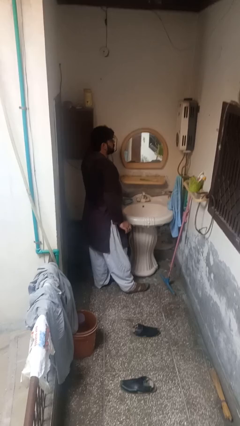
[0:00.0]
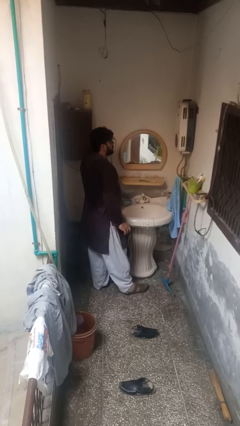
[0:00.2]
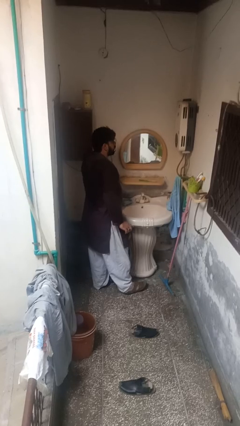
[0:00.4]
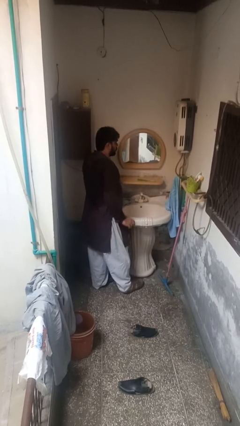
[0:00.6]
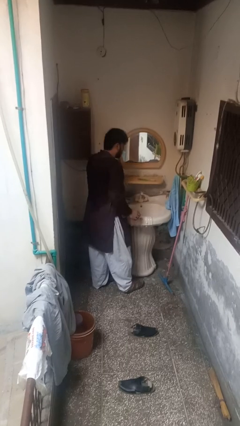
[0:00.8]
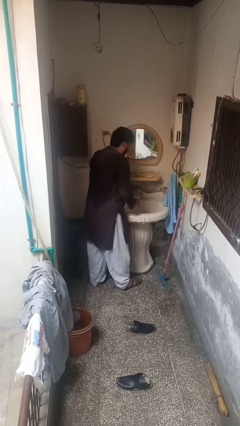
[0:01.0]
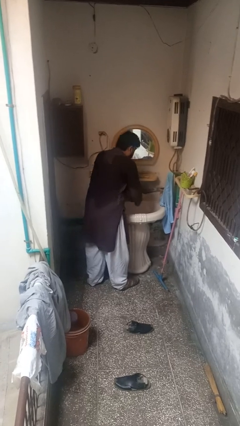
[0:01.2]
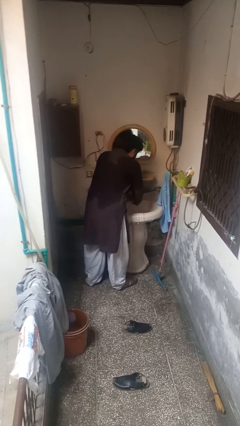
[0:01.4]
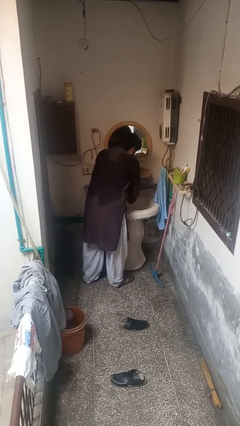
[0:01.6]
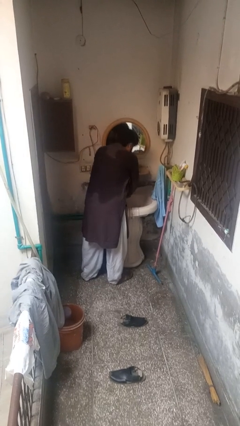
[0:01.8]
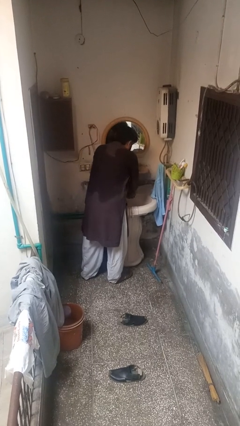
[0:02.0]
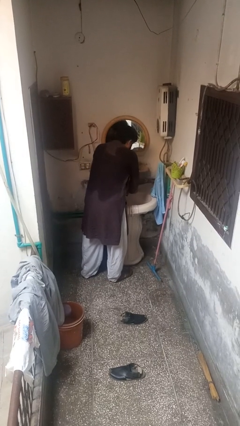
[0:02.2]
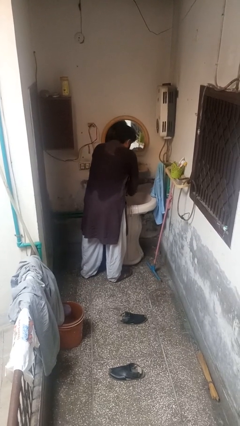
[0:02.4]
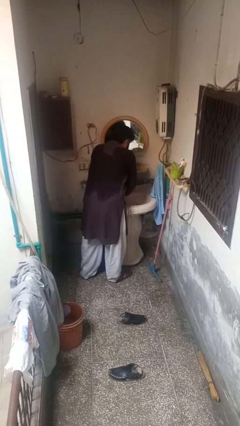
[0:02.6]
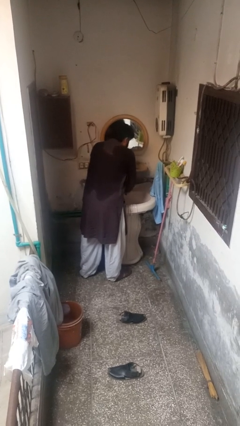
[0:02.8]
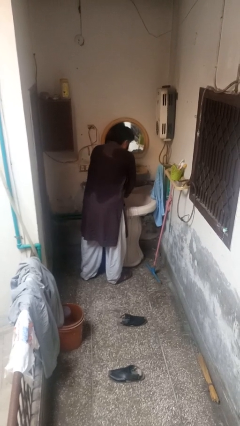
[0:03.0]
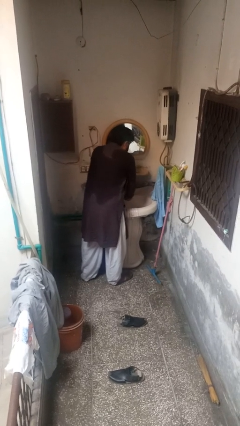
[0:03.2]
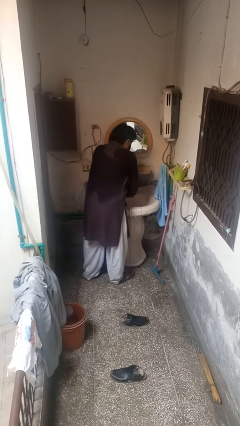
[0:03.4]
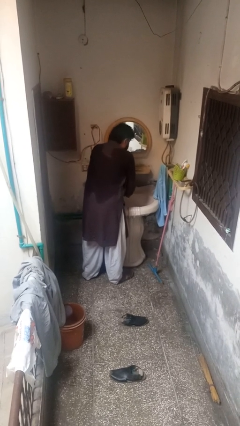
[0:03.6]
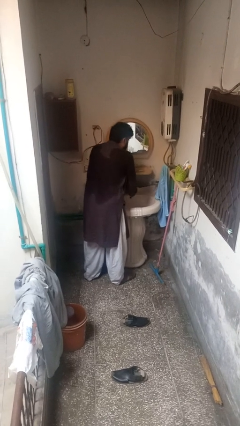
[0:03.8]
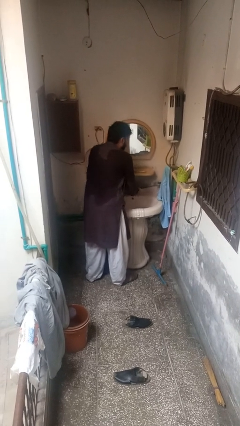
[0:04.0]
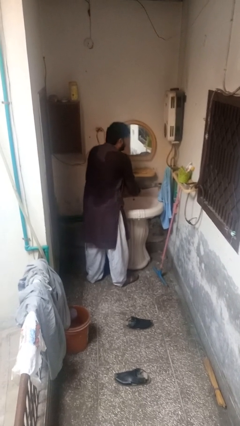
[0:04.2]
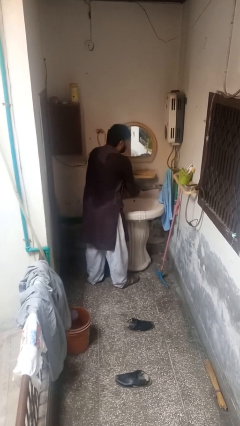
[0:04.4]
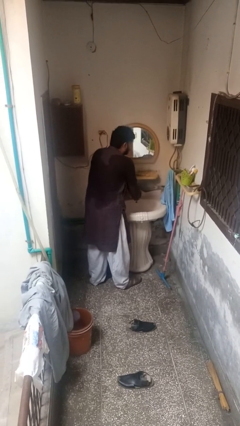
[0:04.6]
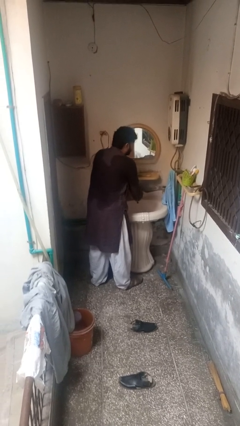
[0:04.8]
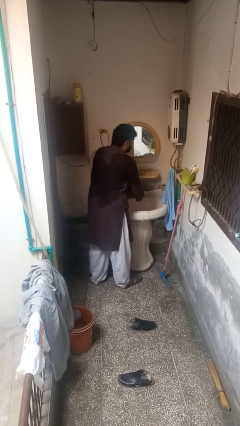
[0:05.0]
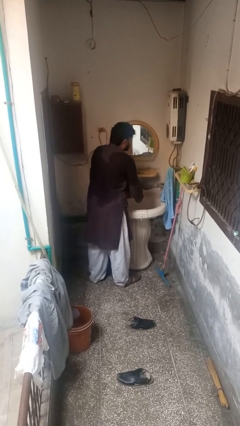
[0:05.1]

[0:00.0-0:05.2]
person washes hands

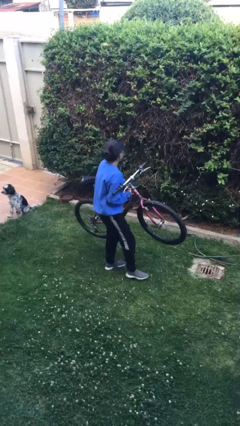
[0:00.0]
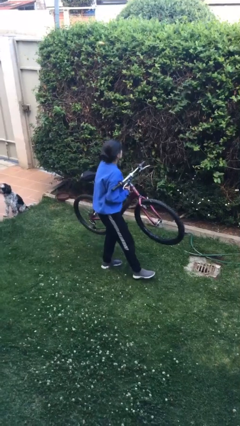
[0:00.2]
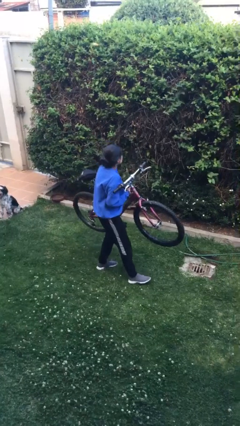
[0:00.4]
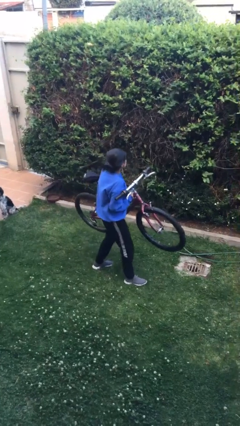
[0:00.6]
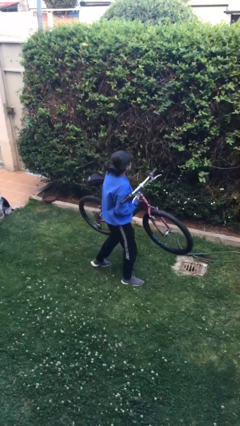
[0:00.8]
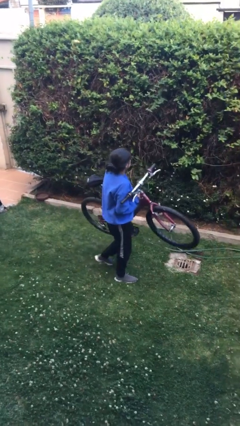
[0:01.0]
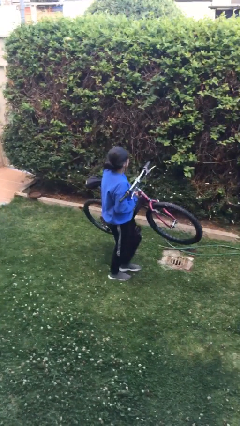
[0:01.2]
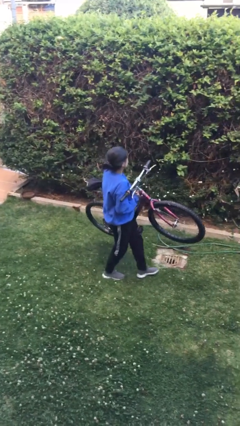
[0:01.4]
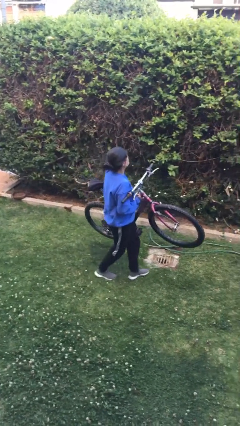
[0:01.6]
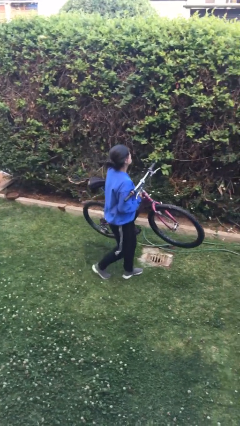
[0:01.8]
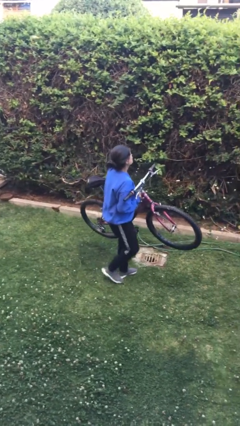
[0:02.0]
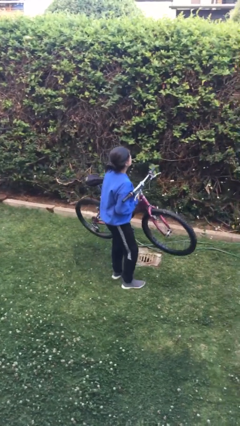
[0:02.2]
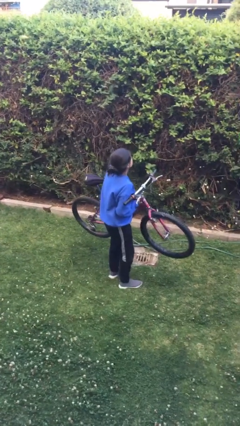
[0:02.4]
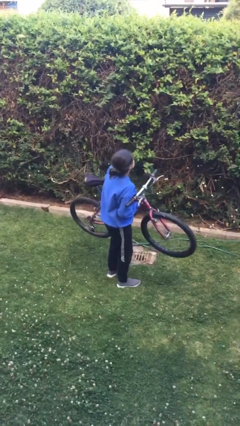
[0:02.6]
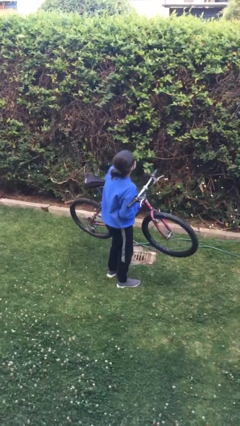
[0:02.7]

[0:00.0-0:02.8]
person carries bicycle

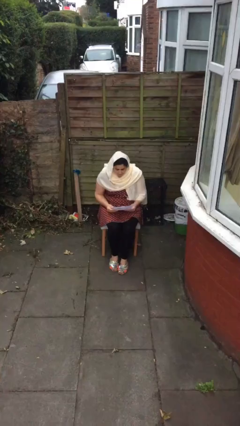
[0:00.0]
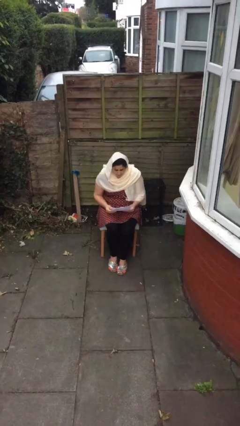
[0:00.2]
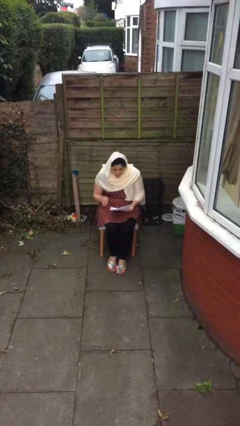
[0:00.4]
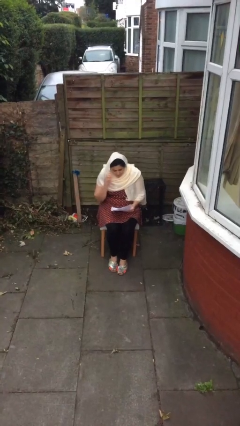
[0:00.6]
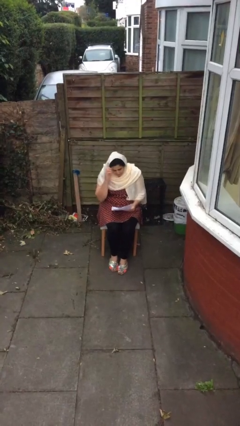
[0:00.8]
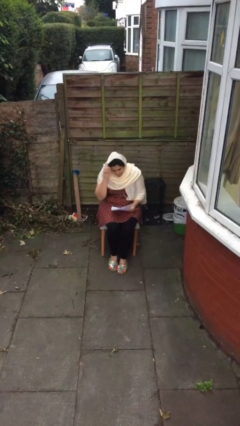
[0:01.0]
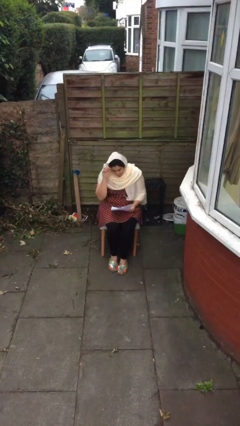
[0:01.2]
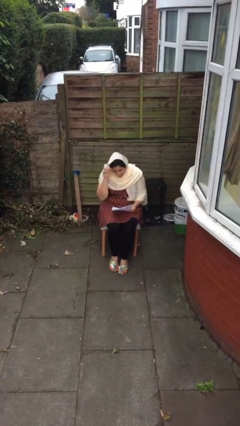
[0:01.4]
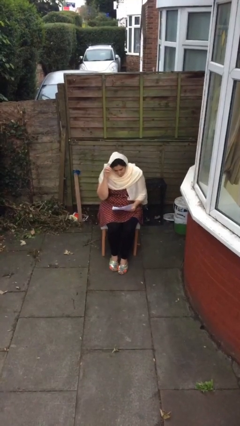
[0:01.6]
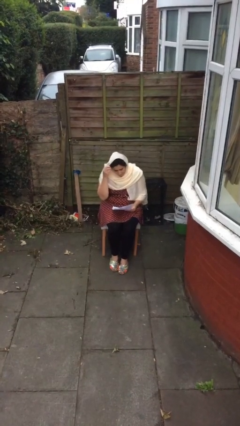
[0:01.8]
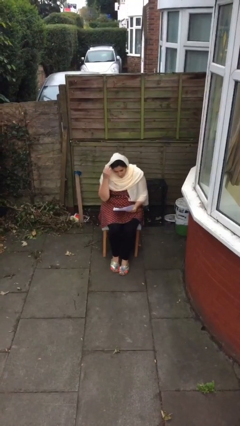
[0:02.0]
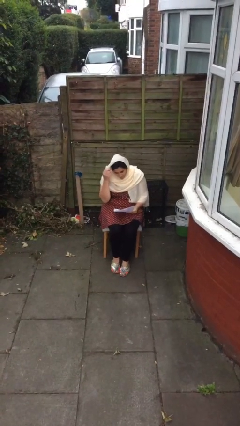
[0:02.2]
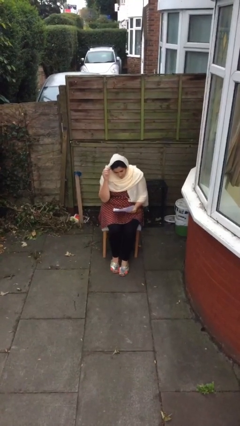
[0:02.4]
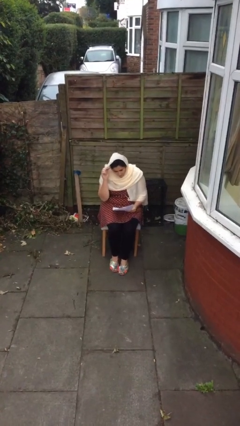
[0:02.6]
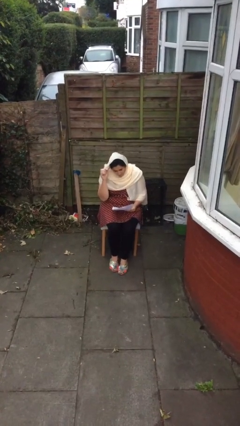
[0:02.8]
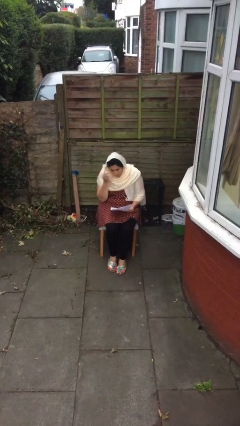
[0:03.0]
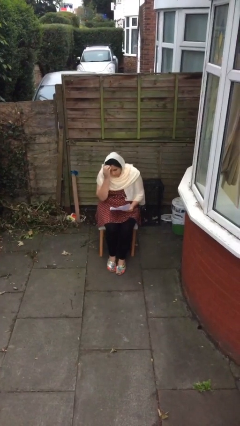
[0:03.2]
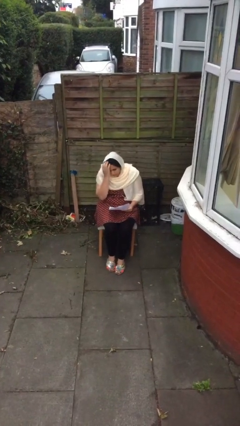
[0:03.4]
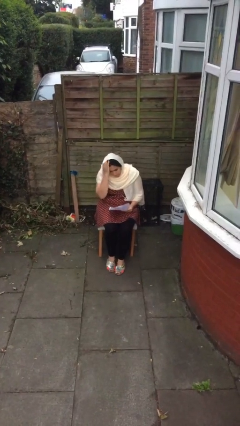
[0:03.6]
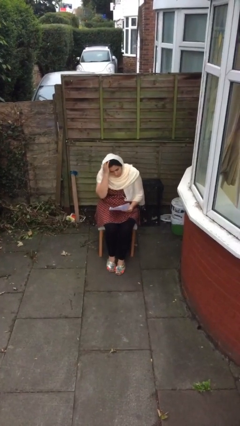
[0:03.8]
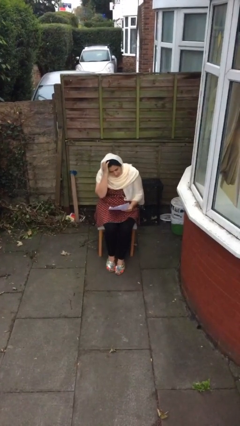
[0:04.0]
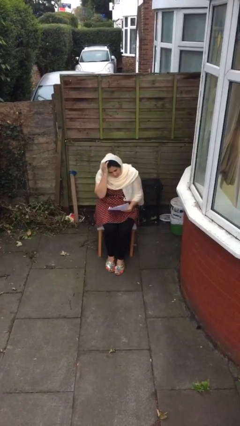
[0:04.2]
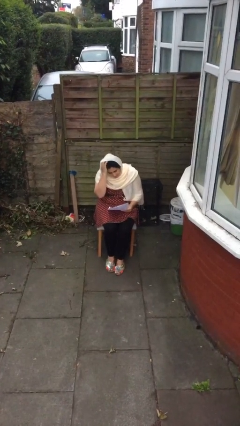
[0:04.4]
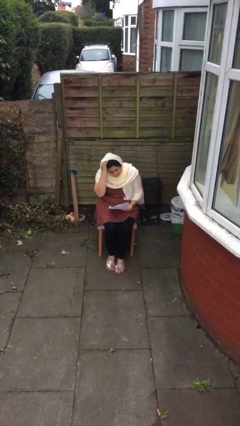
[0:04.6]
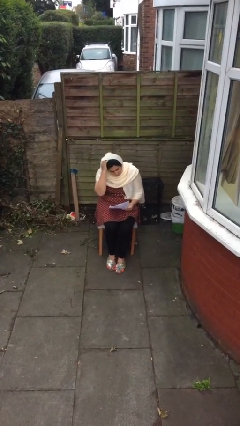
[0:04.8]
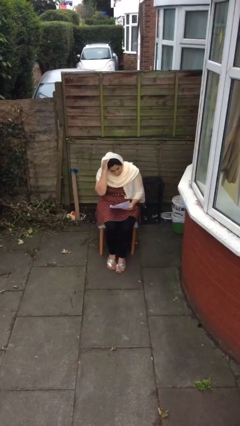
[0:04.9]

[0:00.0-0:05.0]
person reads document

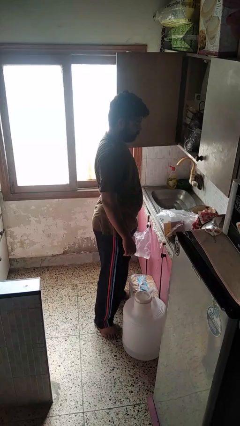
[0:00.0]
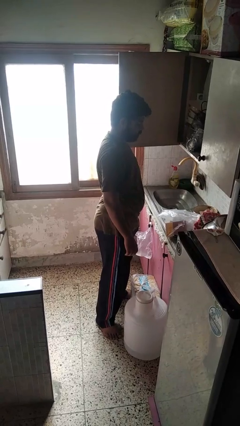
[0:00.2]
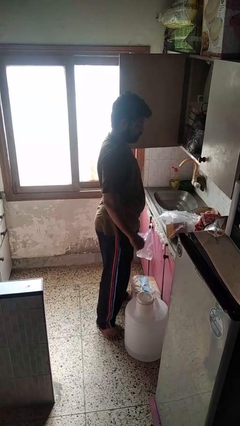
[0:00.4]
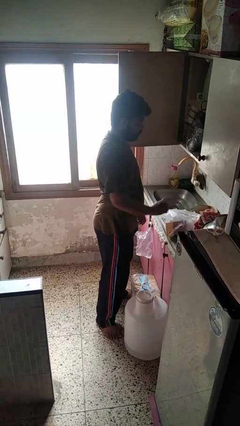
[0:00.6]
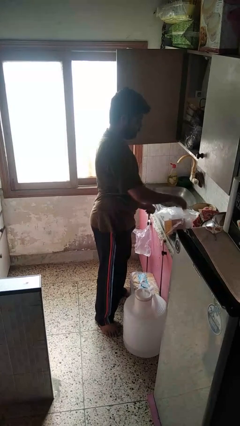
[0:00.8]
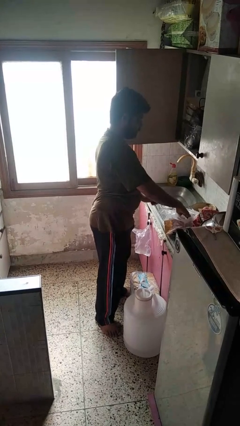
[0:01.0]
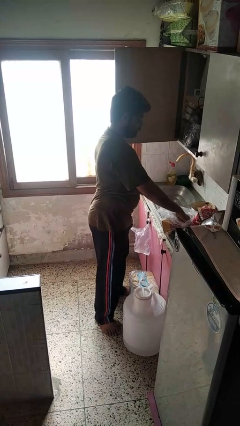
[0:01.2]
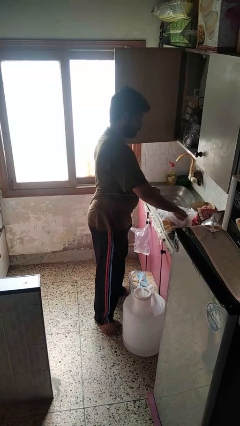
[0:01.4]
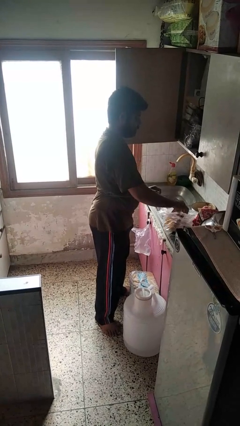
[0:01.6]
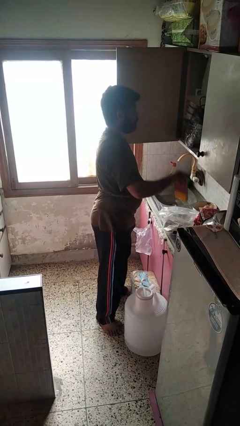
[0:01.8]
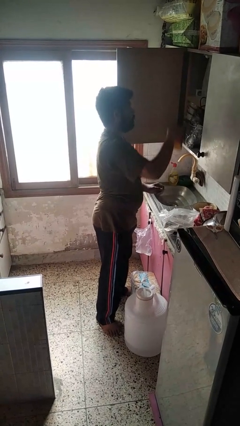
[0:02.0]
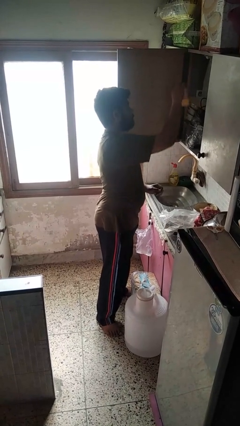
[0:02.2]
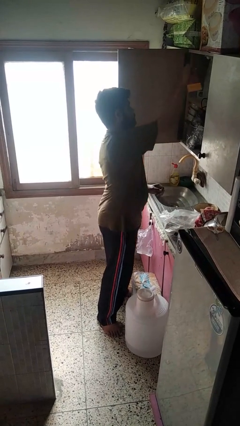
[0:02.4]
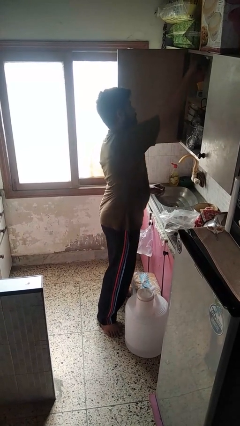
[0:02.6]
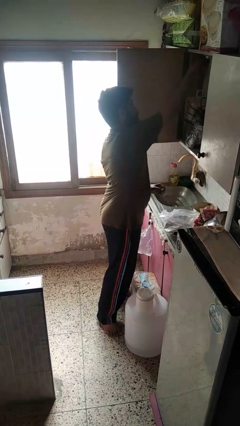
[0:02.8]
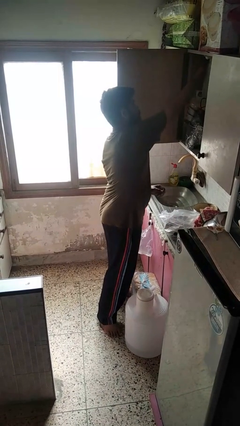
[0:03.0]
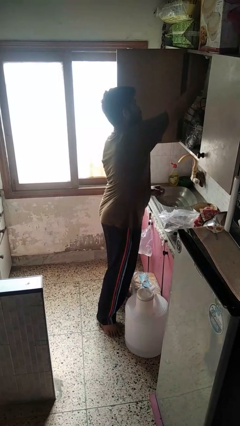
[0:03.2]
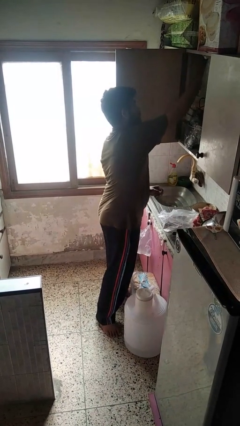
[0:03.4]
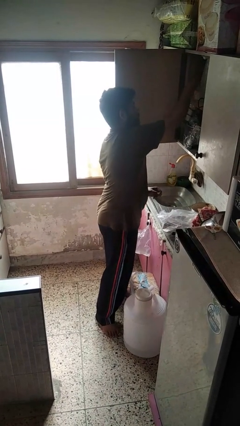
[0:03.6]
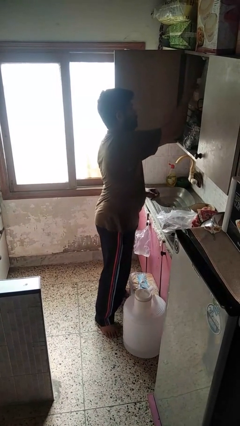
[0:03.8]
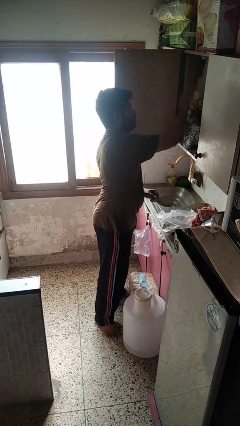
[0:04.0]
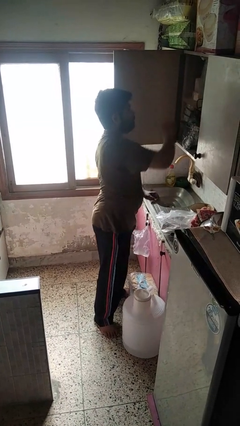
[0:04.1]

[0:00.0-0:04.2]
person loads groceries into cabinet

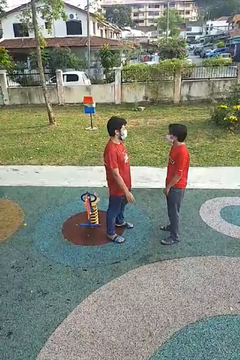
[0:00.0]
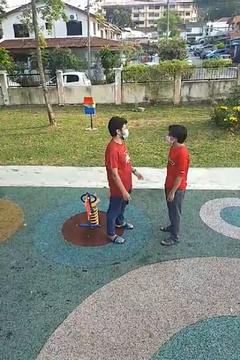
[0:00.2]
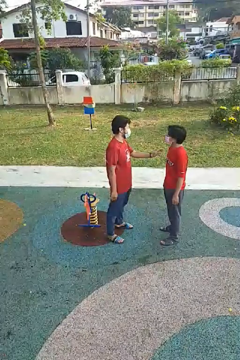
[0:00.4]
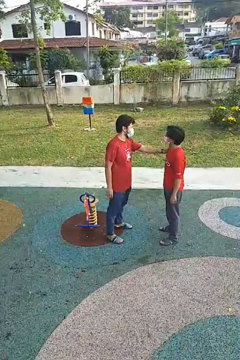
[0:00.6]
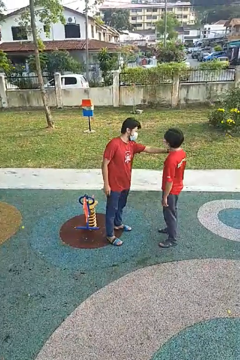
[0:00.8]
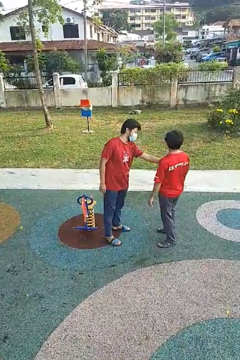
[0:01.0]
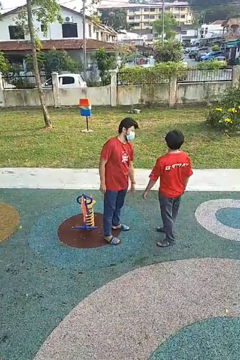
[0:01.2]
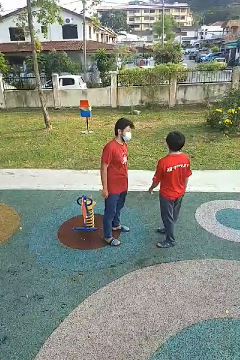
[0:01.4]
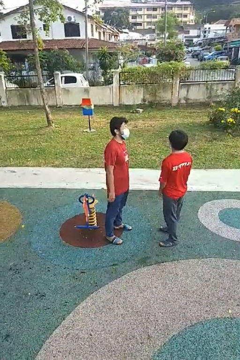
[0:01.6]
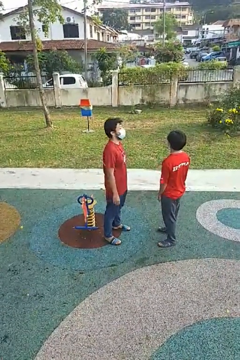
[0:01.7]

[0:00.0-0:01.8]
person shoves person
